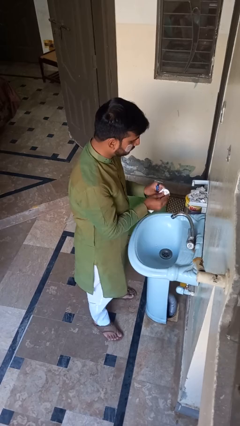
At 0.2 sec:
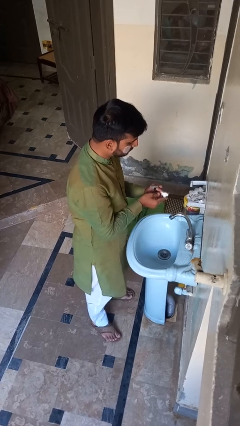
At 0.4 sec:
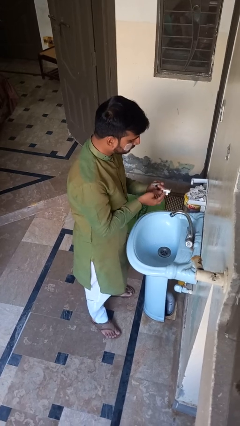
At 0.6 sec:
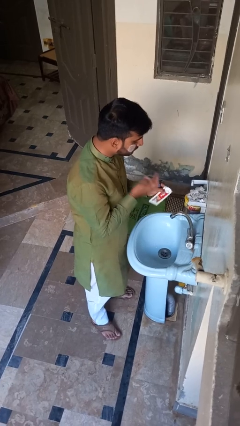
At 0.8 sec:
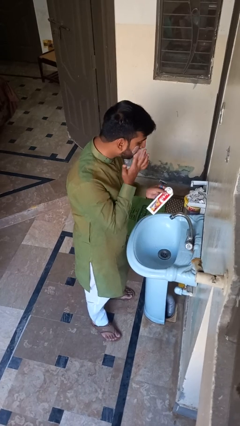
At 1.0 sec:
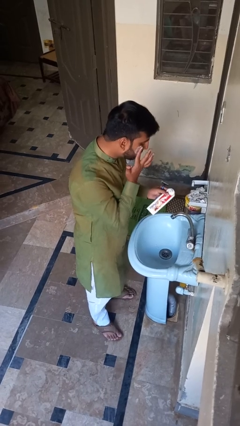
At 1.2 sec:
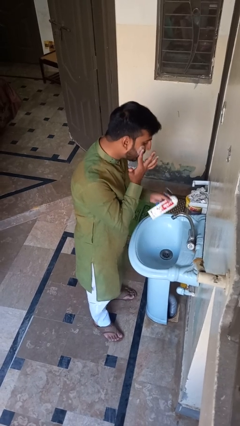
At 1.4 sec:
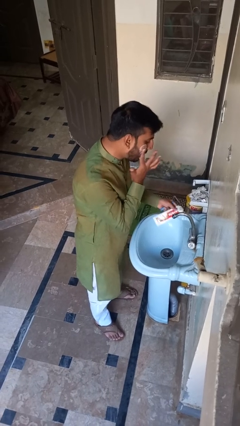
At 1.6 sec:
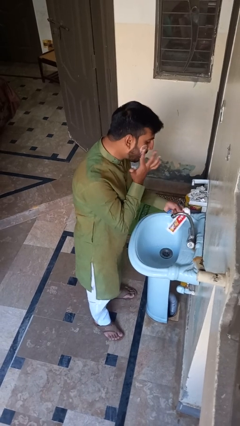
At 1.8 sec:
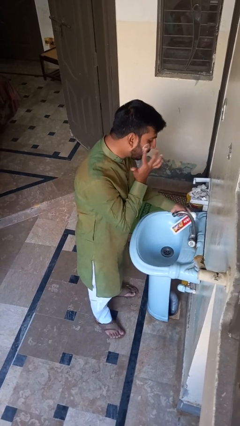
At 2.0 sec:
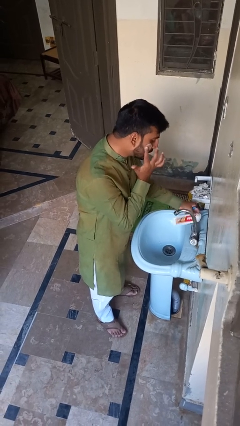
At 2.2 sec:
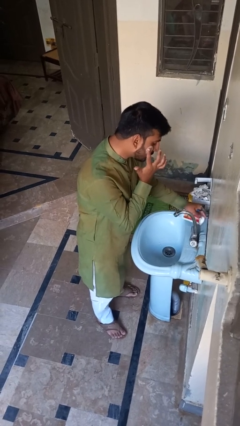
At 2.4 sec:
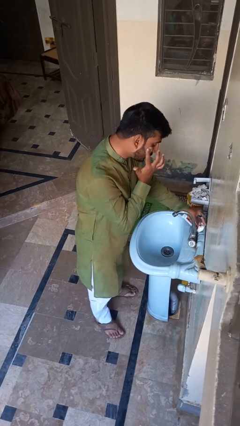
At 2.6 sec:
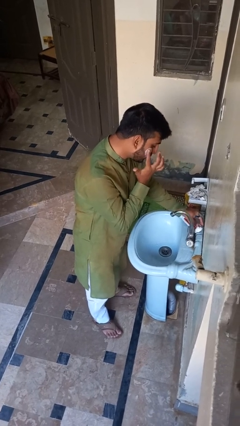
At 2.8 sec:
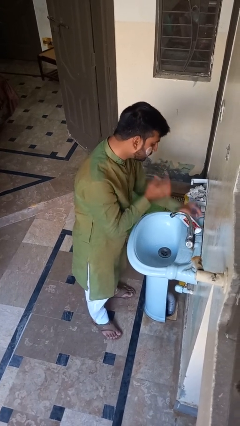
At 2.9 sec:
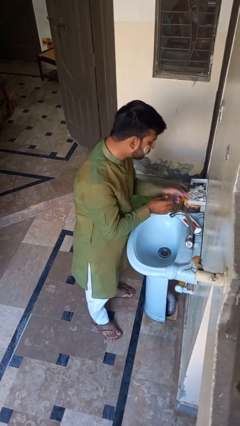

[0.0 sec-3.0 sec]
person applies shaving cream

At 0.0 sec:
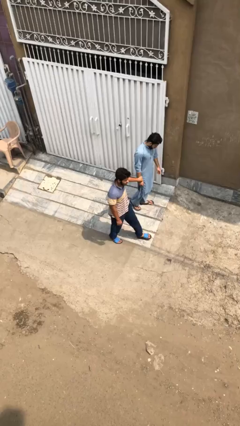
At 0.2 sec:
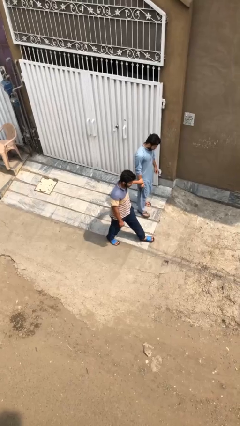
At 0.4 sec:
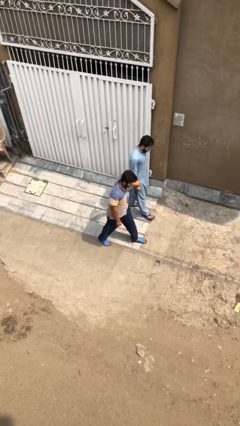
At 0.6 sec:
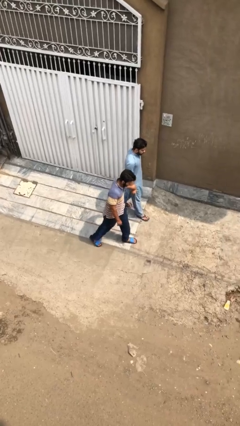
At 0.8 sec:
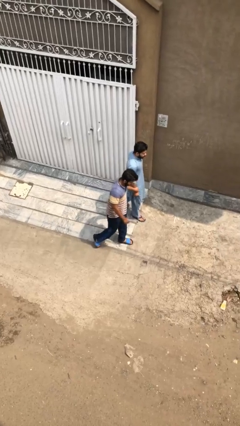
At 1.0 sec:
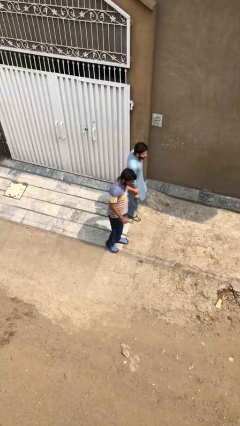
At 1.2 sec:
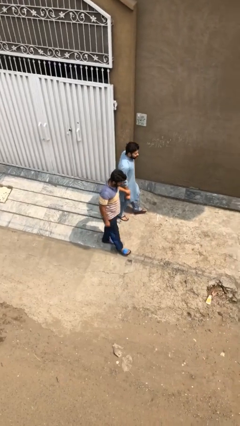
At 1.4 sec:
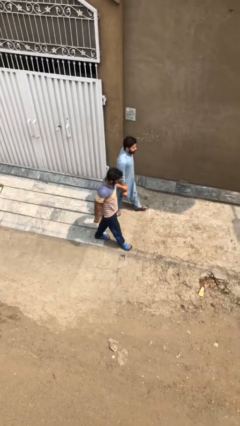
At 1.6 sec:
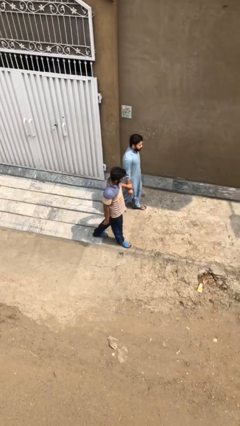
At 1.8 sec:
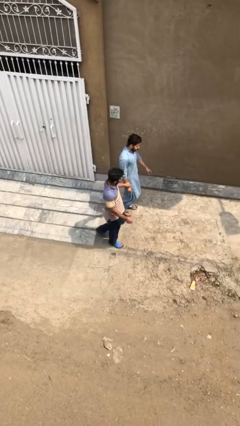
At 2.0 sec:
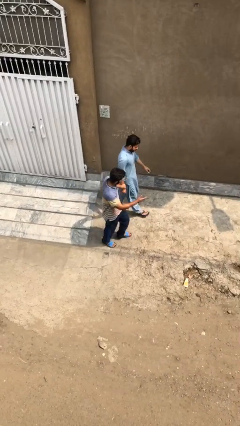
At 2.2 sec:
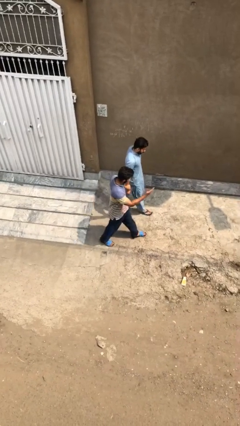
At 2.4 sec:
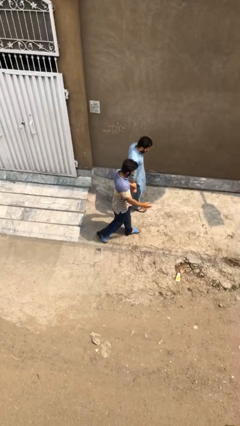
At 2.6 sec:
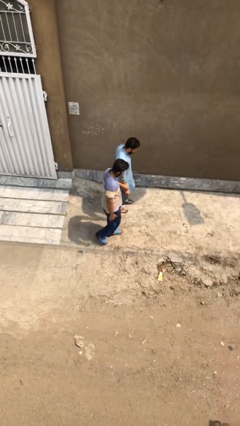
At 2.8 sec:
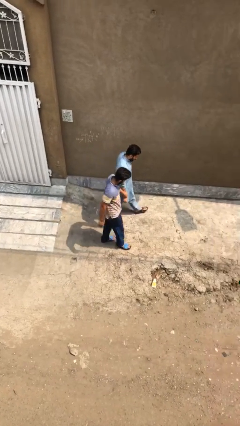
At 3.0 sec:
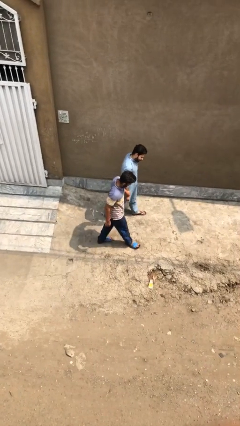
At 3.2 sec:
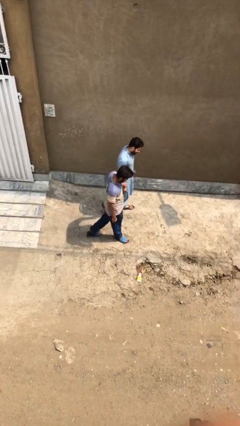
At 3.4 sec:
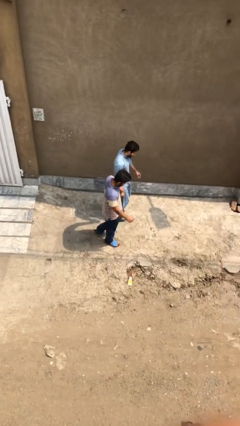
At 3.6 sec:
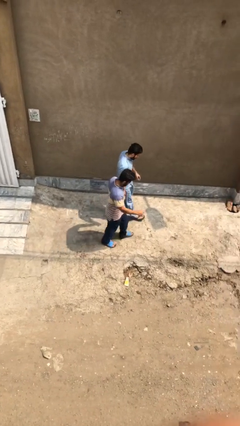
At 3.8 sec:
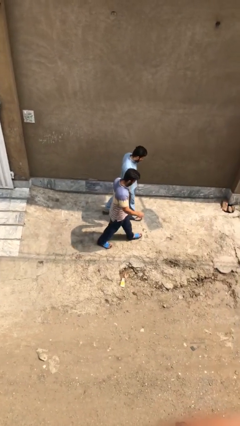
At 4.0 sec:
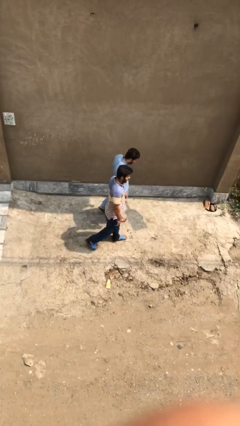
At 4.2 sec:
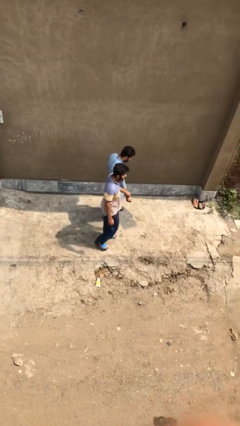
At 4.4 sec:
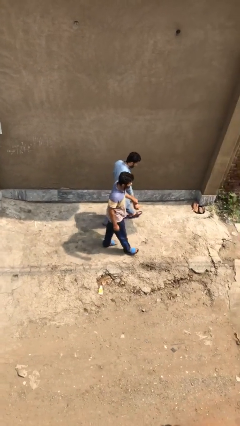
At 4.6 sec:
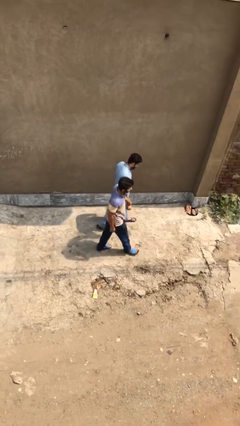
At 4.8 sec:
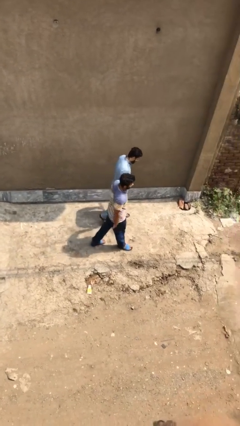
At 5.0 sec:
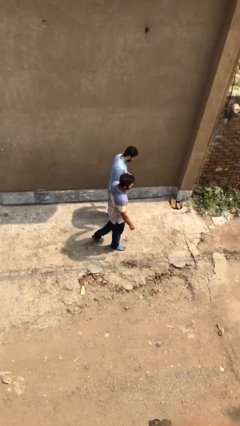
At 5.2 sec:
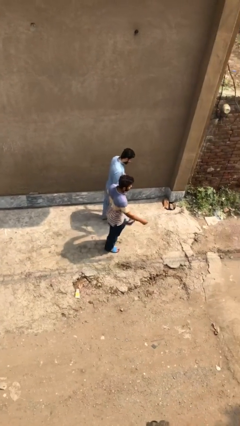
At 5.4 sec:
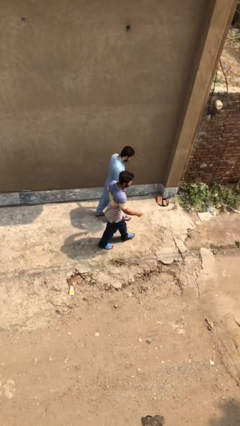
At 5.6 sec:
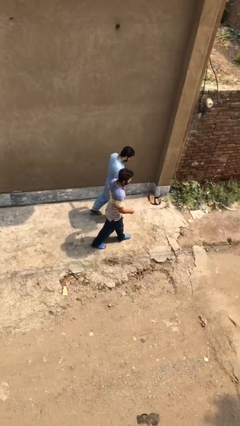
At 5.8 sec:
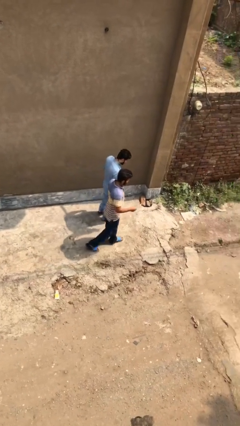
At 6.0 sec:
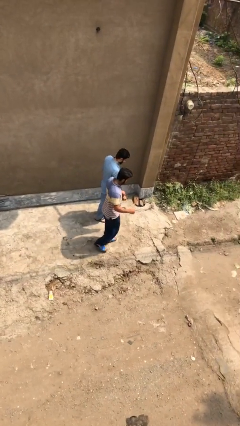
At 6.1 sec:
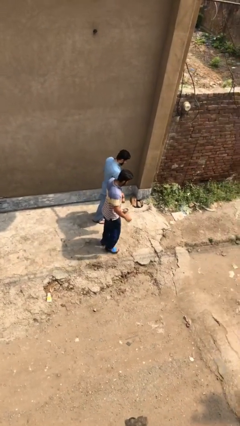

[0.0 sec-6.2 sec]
person holds hand

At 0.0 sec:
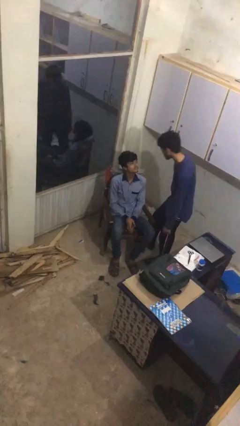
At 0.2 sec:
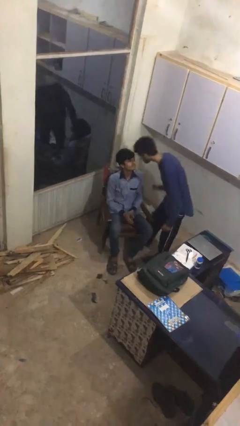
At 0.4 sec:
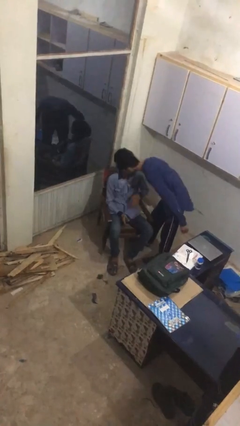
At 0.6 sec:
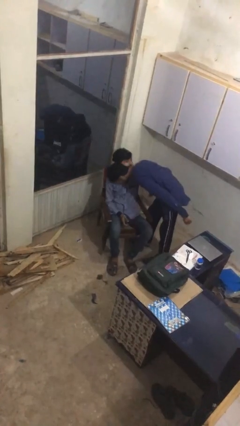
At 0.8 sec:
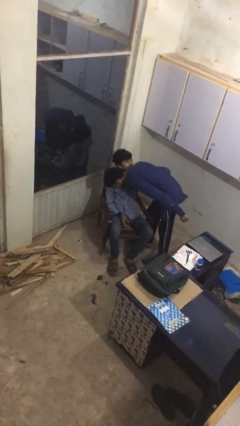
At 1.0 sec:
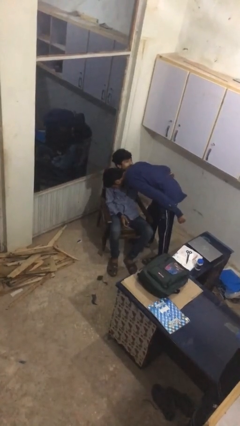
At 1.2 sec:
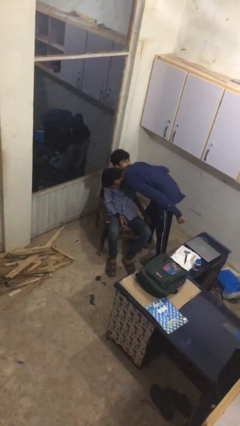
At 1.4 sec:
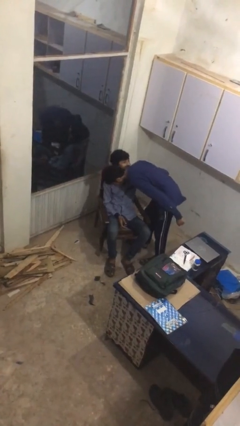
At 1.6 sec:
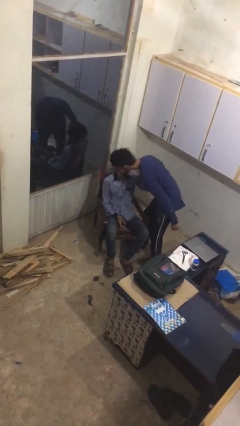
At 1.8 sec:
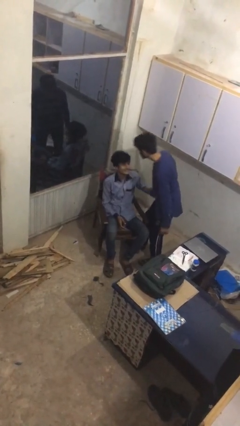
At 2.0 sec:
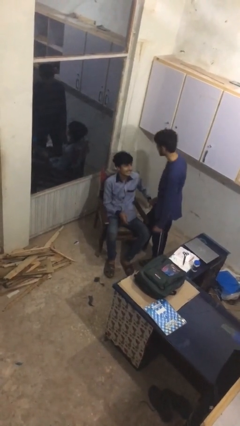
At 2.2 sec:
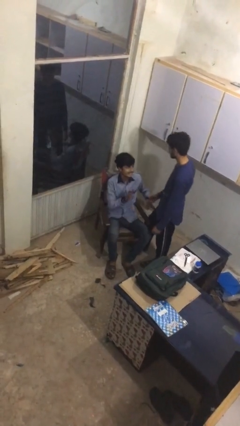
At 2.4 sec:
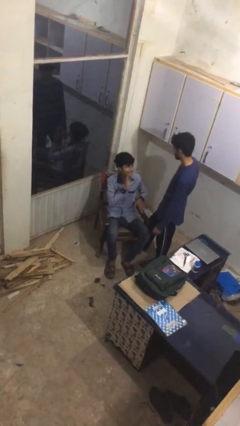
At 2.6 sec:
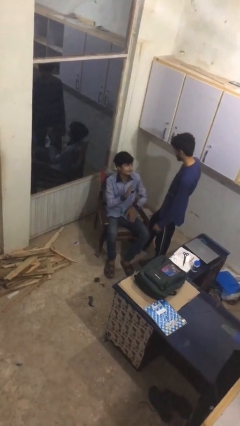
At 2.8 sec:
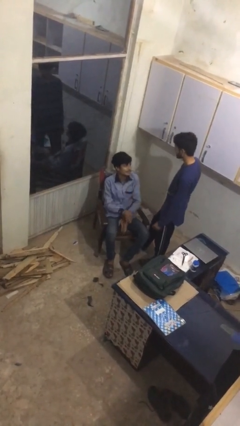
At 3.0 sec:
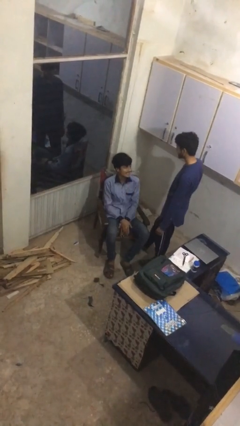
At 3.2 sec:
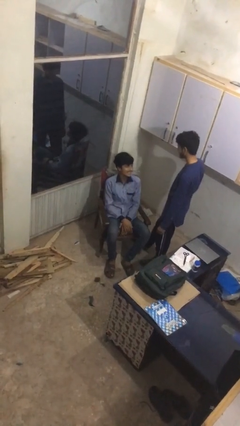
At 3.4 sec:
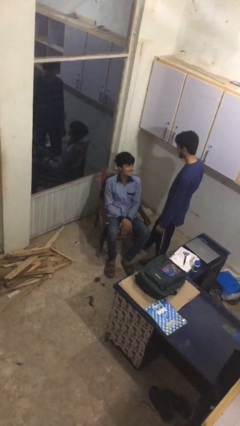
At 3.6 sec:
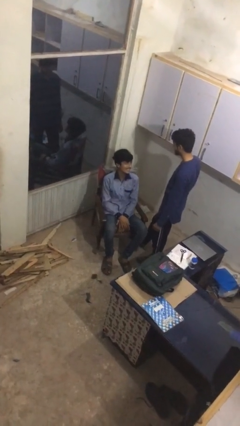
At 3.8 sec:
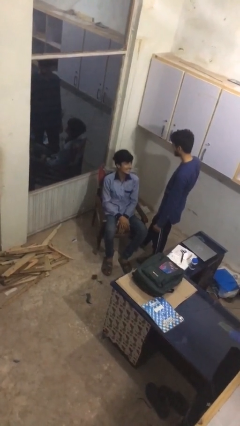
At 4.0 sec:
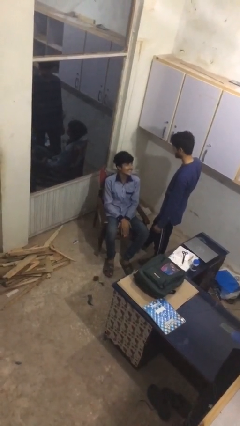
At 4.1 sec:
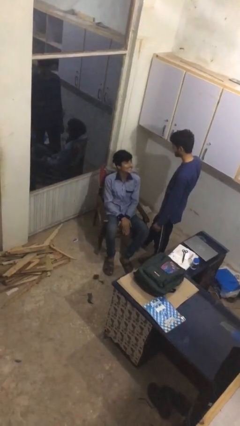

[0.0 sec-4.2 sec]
person embraces person

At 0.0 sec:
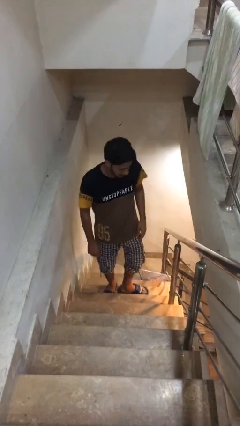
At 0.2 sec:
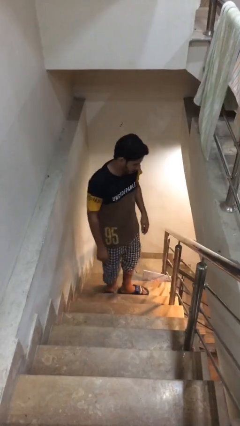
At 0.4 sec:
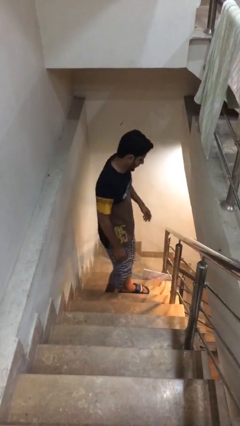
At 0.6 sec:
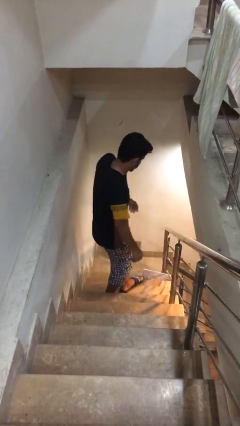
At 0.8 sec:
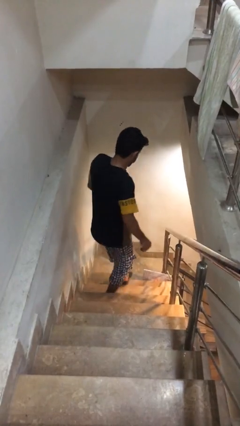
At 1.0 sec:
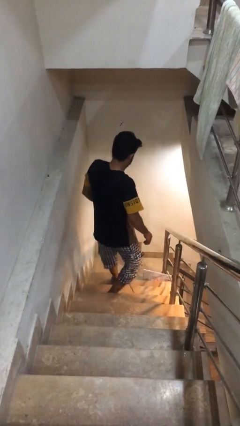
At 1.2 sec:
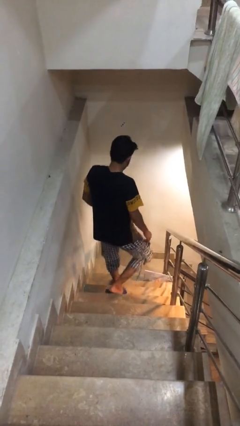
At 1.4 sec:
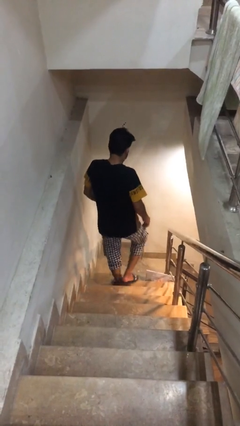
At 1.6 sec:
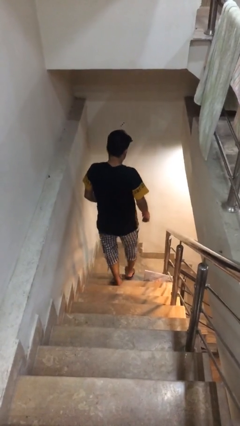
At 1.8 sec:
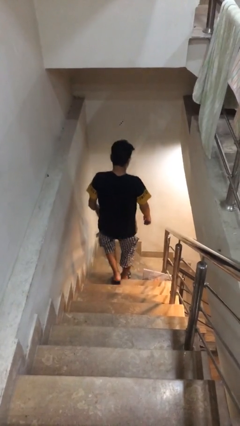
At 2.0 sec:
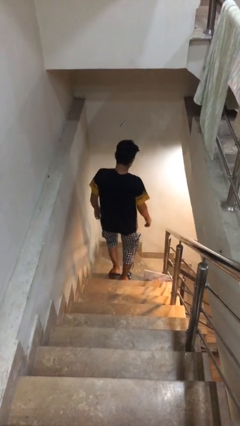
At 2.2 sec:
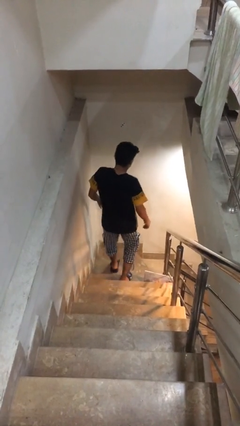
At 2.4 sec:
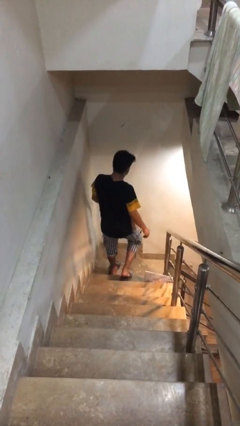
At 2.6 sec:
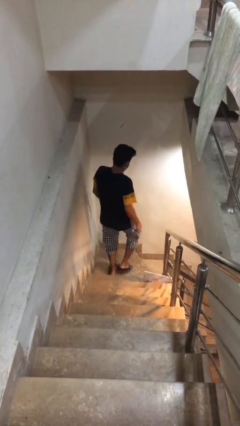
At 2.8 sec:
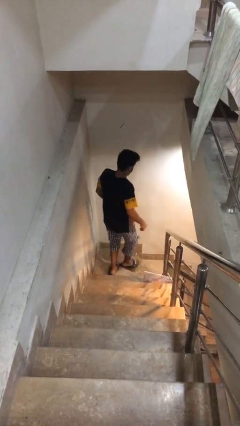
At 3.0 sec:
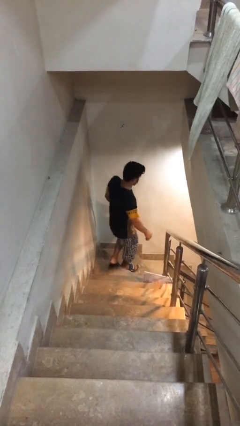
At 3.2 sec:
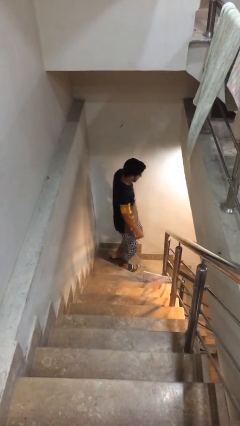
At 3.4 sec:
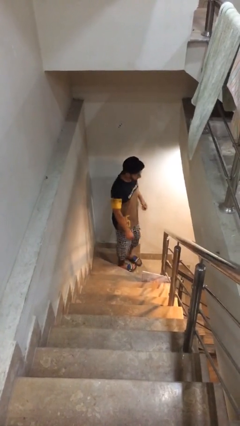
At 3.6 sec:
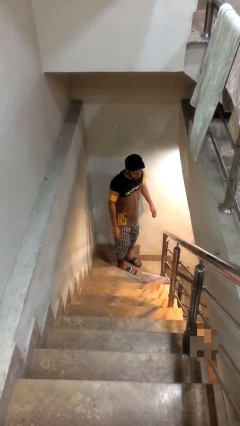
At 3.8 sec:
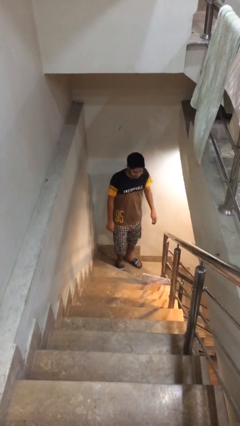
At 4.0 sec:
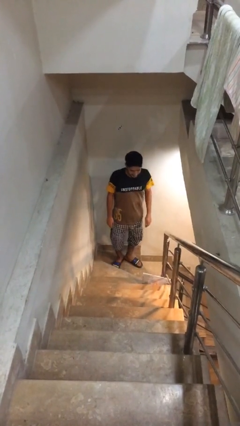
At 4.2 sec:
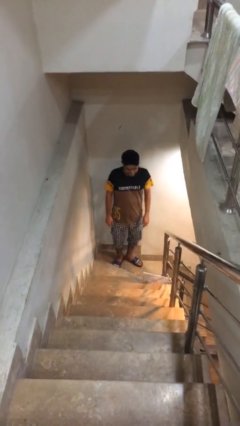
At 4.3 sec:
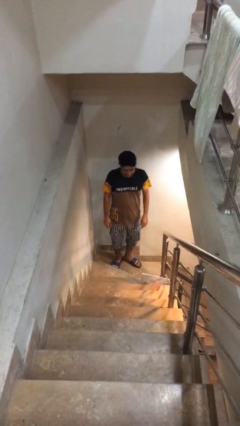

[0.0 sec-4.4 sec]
person climbs down stairs
